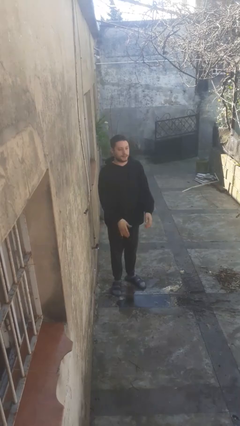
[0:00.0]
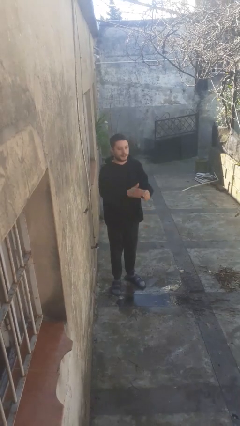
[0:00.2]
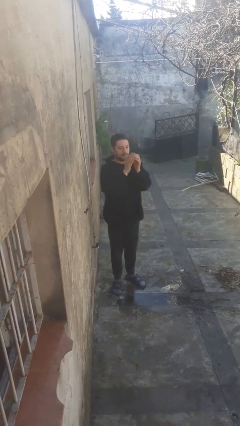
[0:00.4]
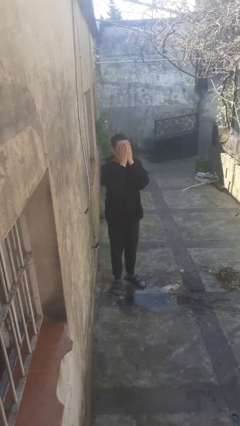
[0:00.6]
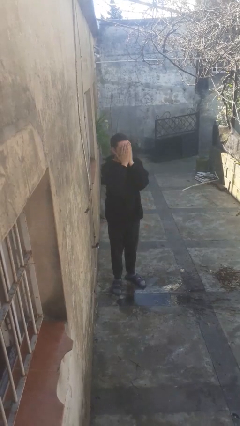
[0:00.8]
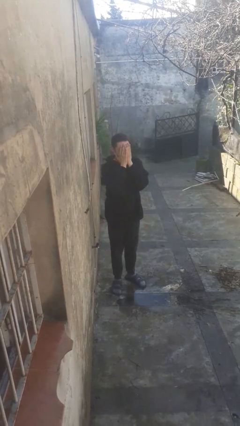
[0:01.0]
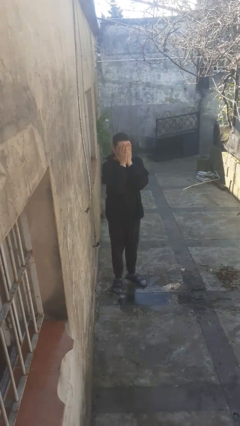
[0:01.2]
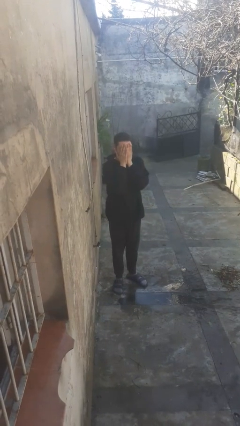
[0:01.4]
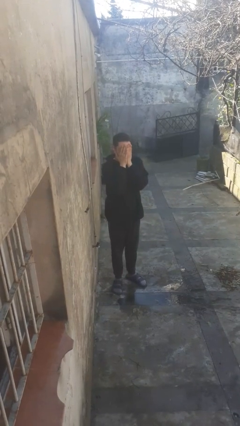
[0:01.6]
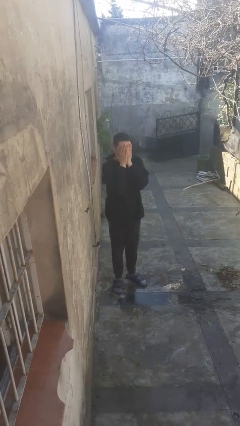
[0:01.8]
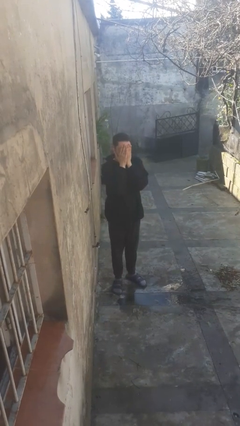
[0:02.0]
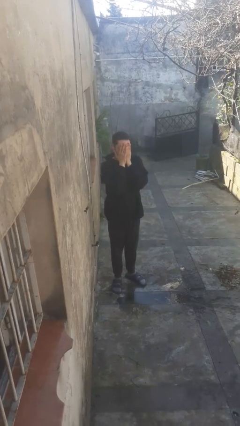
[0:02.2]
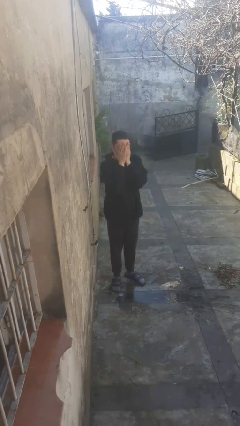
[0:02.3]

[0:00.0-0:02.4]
person covers face with hands

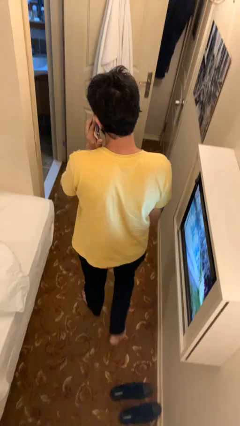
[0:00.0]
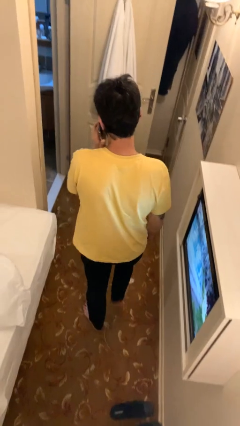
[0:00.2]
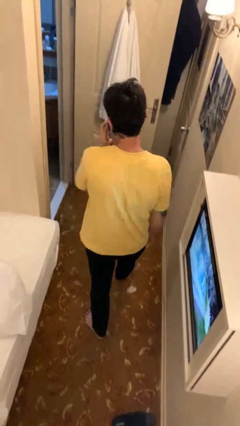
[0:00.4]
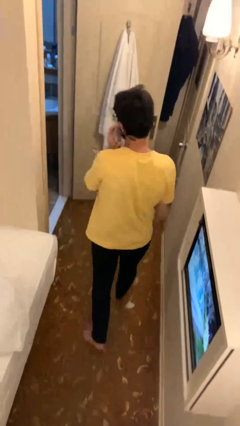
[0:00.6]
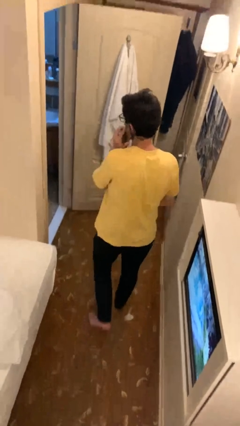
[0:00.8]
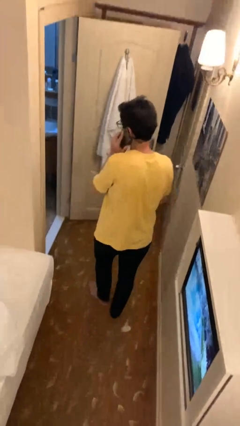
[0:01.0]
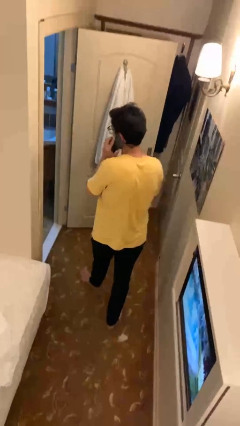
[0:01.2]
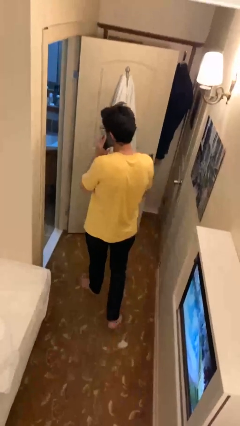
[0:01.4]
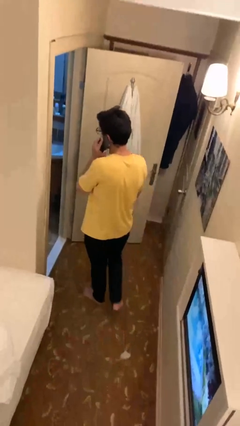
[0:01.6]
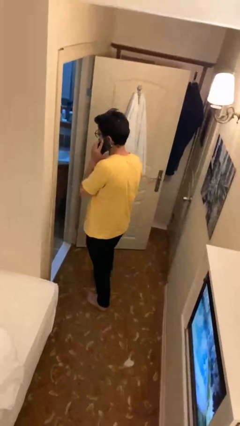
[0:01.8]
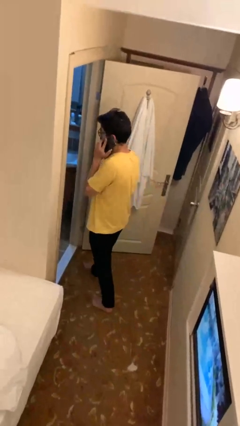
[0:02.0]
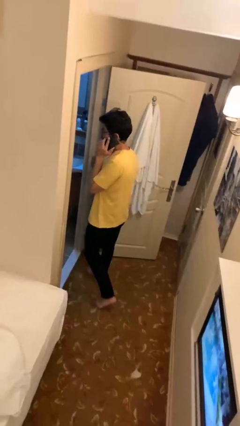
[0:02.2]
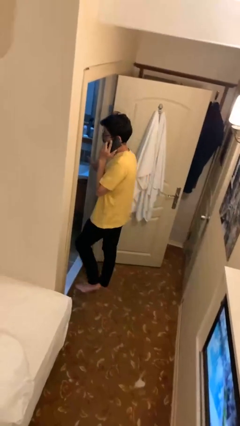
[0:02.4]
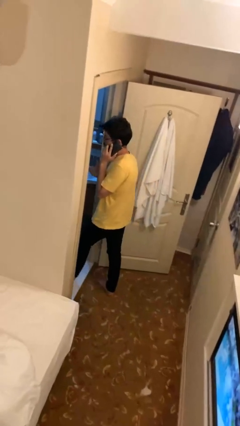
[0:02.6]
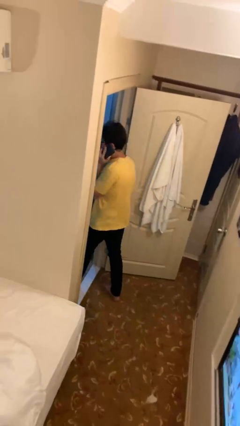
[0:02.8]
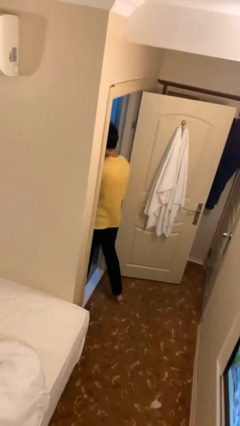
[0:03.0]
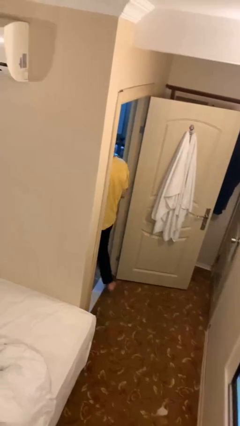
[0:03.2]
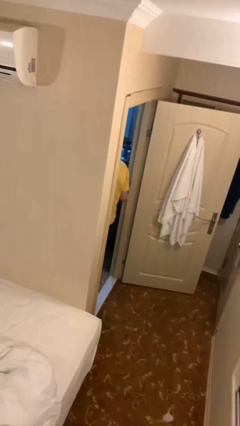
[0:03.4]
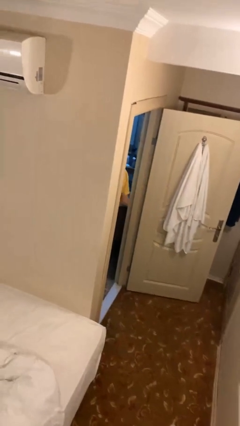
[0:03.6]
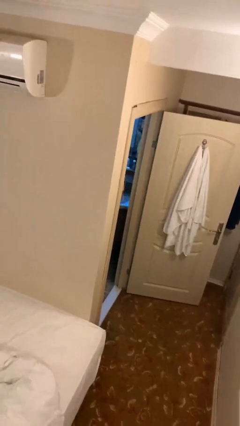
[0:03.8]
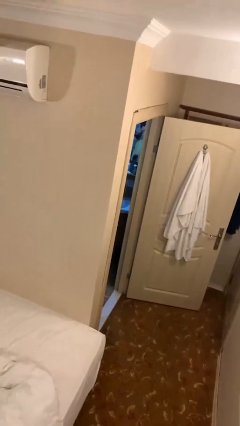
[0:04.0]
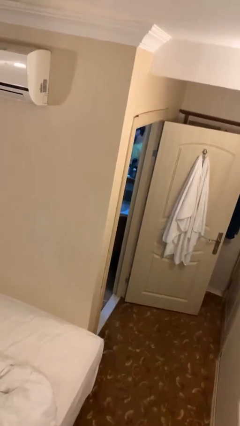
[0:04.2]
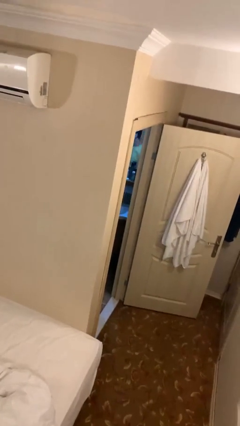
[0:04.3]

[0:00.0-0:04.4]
person exits scene through structure

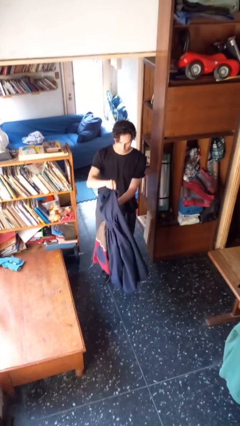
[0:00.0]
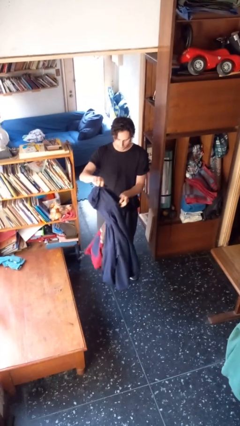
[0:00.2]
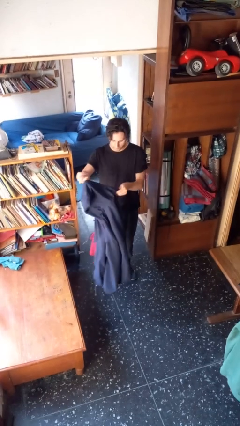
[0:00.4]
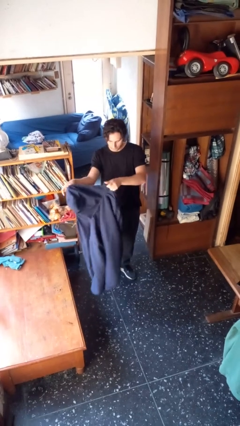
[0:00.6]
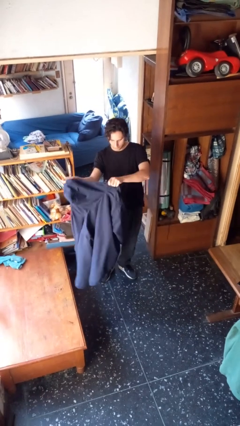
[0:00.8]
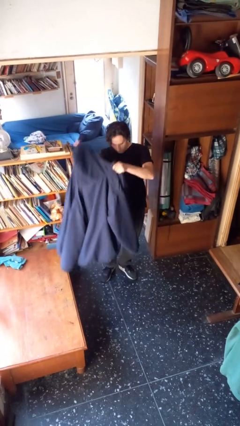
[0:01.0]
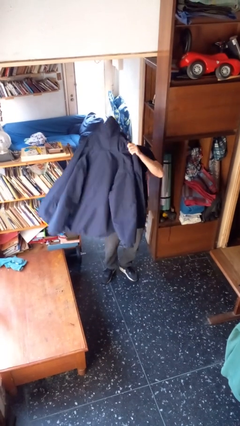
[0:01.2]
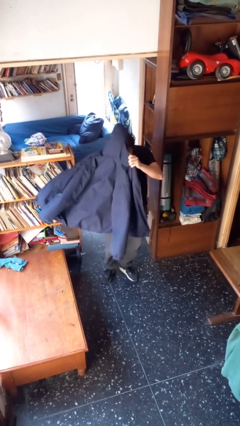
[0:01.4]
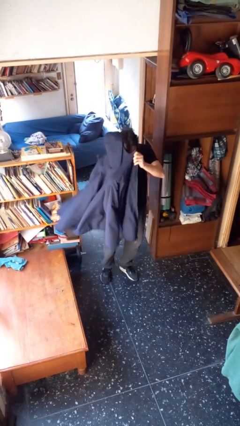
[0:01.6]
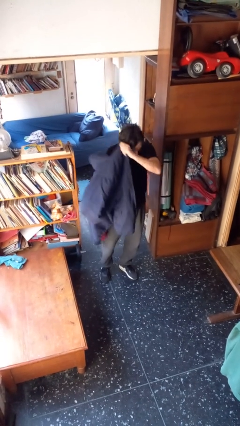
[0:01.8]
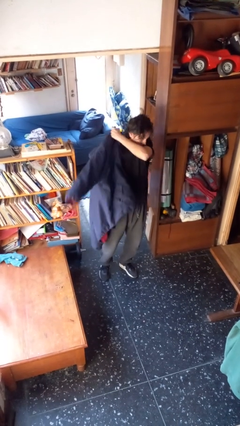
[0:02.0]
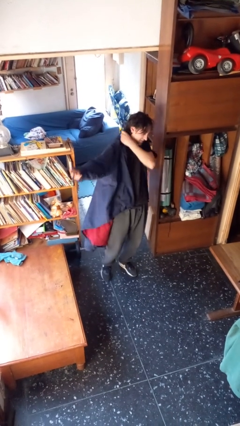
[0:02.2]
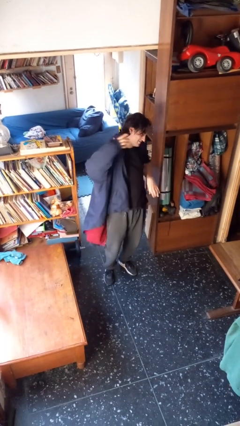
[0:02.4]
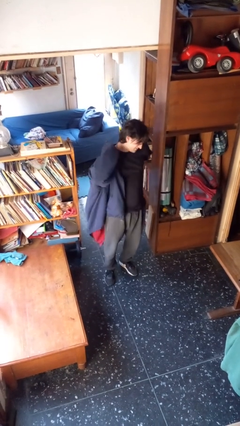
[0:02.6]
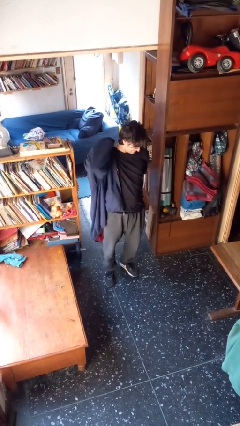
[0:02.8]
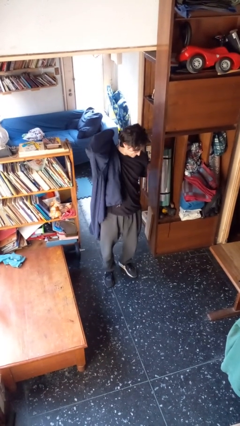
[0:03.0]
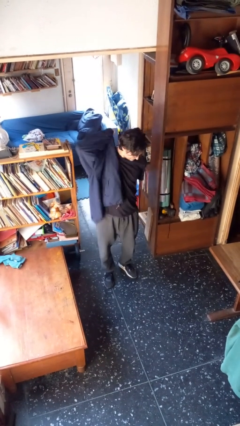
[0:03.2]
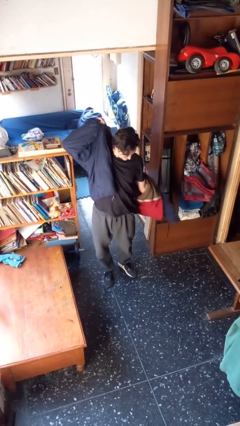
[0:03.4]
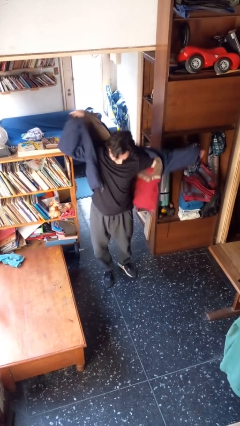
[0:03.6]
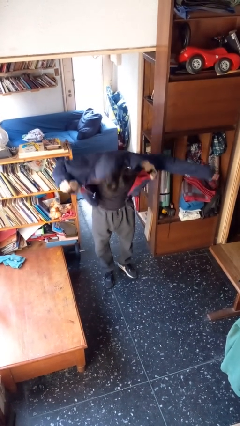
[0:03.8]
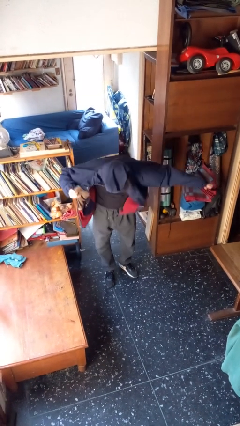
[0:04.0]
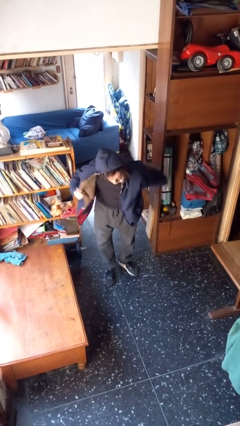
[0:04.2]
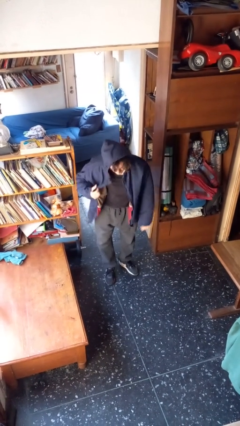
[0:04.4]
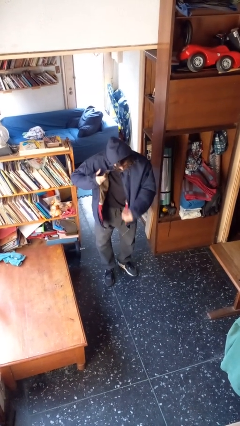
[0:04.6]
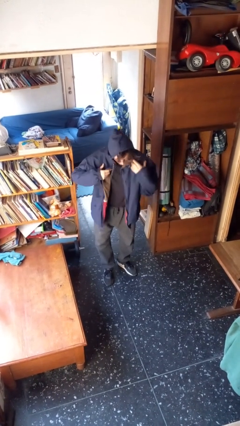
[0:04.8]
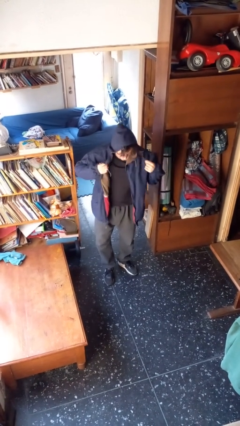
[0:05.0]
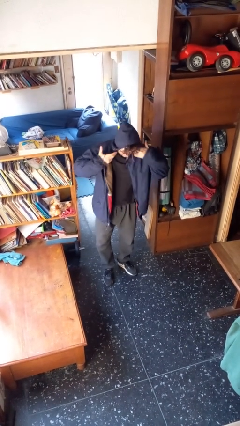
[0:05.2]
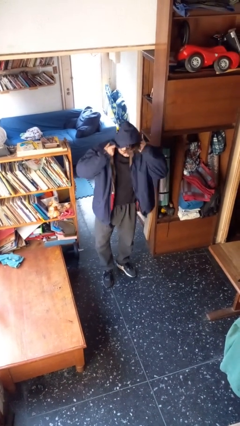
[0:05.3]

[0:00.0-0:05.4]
person puts on hoodie

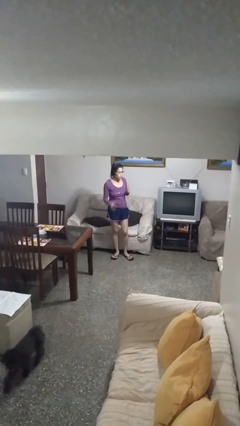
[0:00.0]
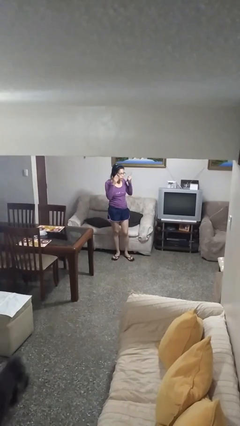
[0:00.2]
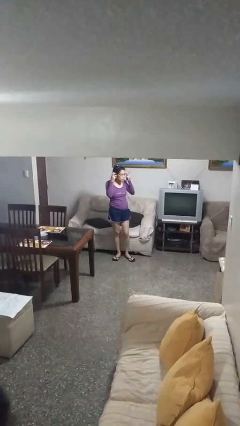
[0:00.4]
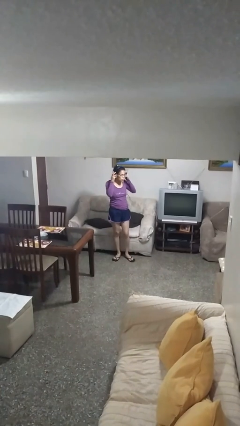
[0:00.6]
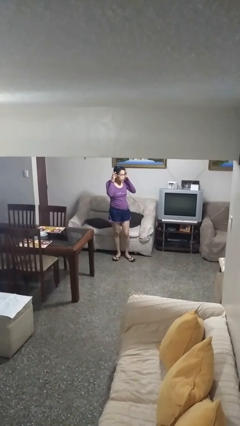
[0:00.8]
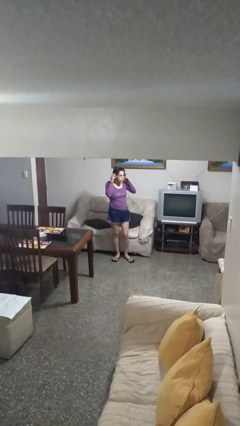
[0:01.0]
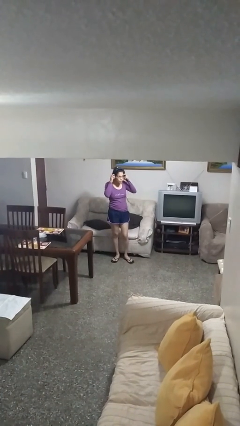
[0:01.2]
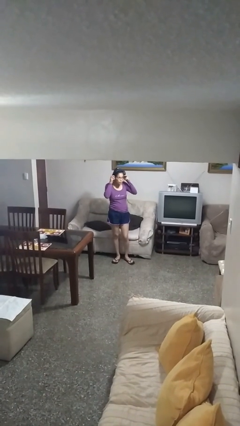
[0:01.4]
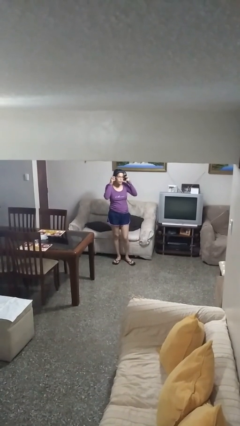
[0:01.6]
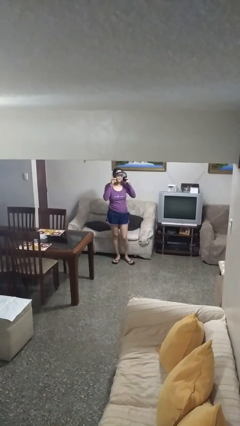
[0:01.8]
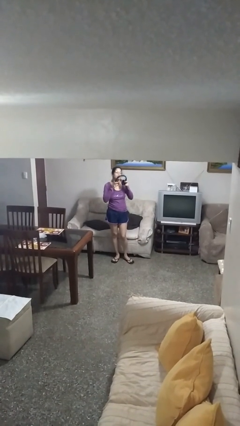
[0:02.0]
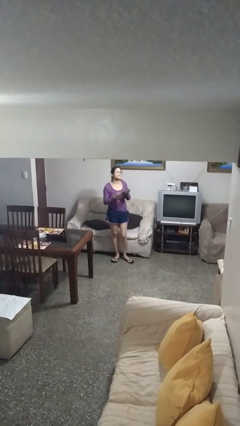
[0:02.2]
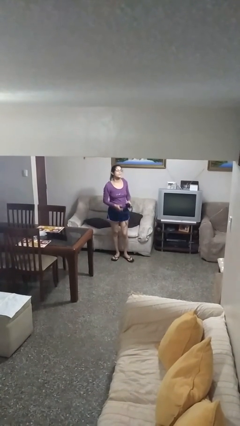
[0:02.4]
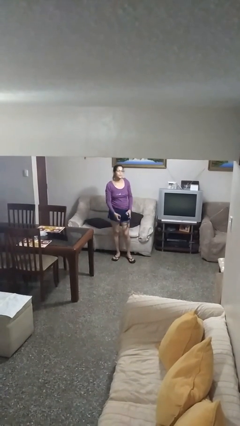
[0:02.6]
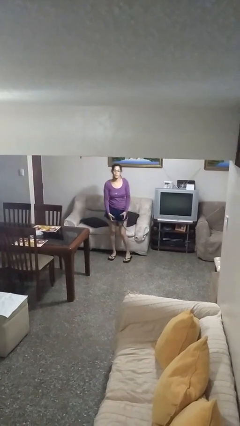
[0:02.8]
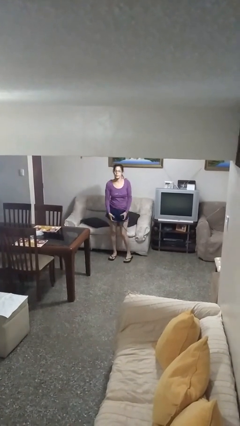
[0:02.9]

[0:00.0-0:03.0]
person takes off headphones

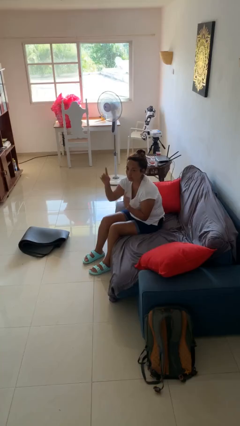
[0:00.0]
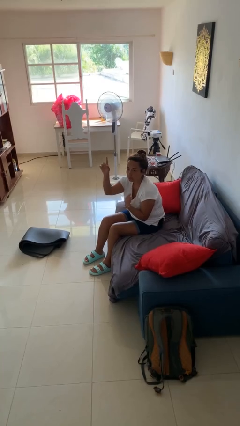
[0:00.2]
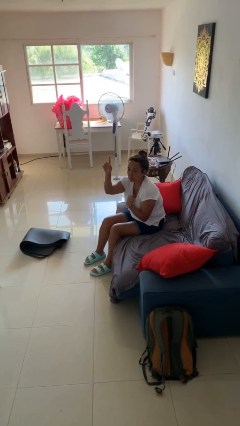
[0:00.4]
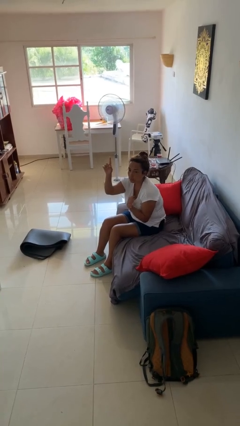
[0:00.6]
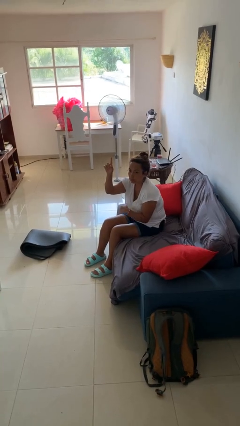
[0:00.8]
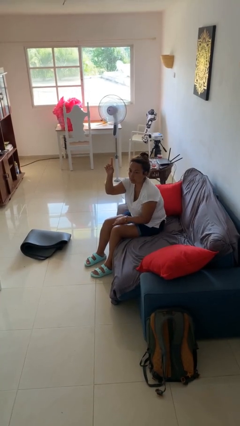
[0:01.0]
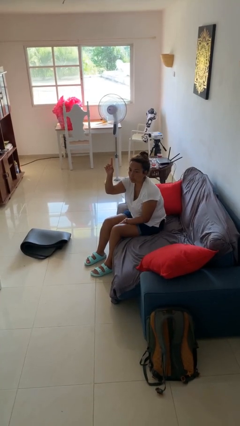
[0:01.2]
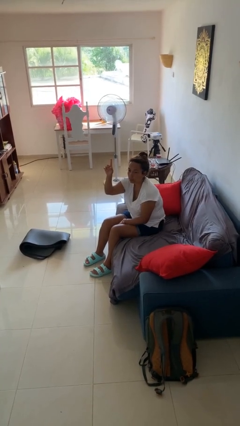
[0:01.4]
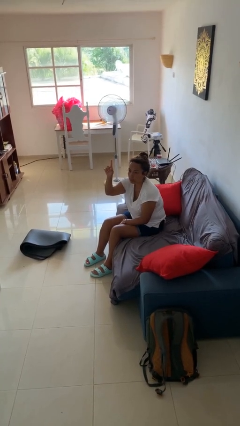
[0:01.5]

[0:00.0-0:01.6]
person gestures raise hand

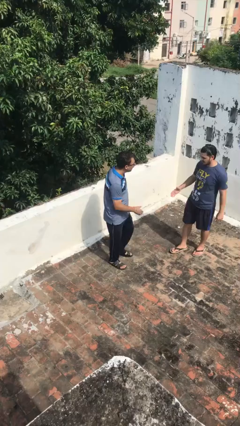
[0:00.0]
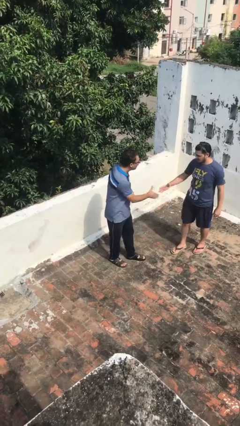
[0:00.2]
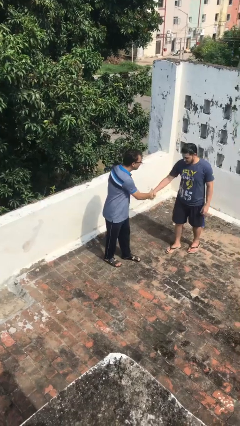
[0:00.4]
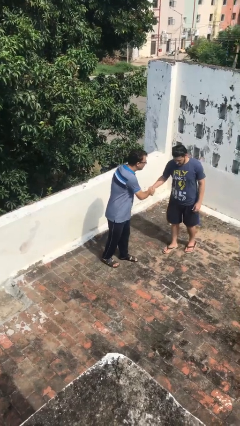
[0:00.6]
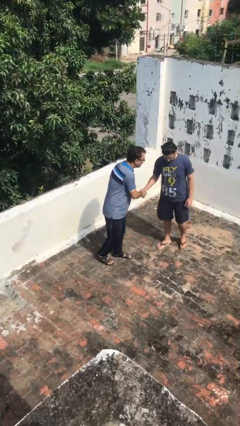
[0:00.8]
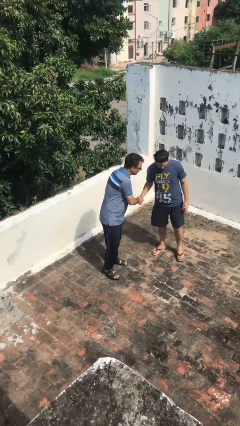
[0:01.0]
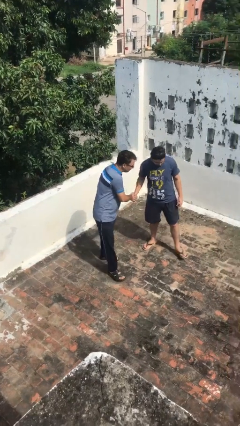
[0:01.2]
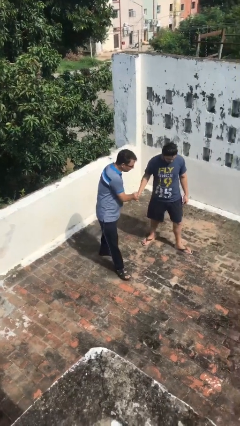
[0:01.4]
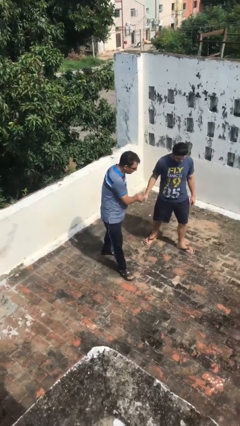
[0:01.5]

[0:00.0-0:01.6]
person shakes hand
